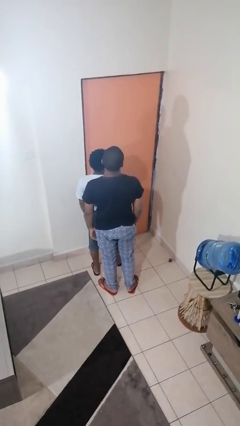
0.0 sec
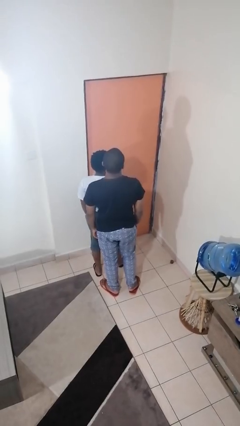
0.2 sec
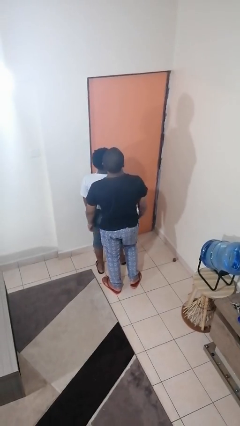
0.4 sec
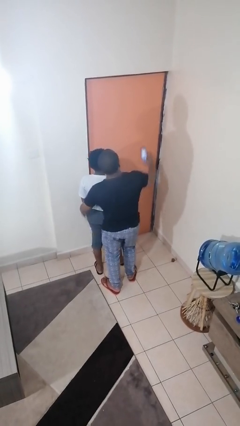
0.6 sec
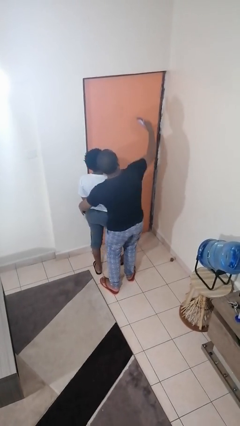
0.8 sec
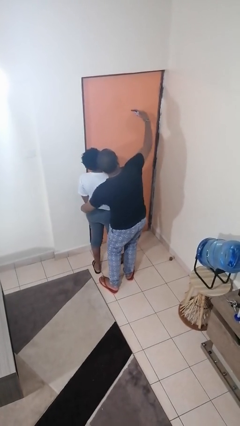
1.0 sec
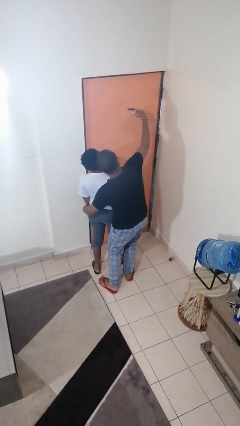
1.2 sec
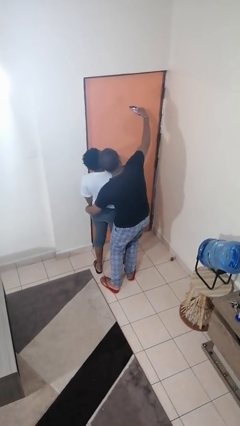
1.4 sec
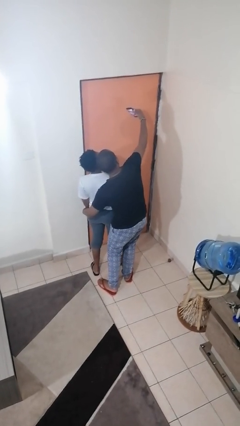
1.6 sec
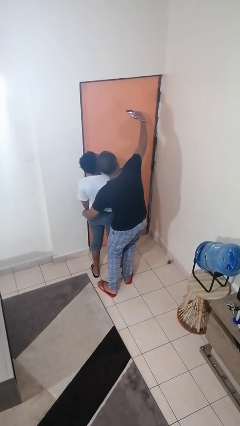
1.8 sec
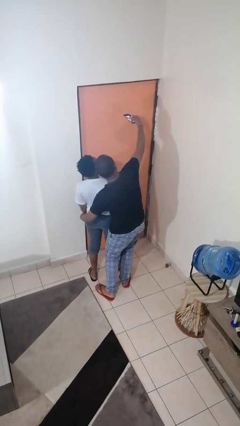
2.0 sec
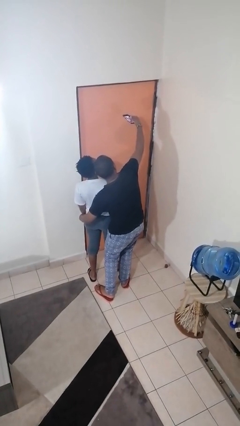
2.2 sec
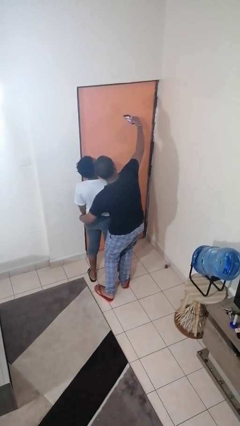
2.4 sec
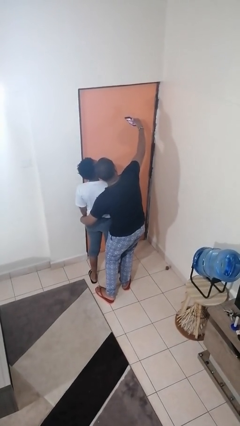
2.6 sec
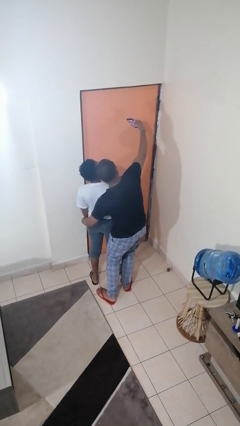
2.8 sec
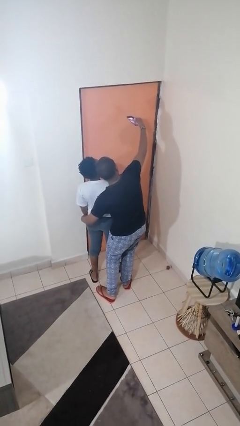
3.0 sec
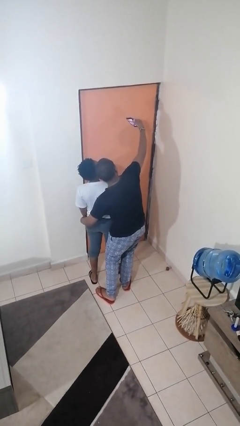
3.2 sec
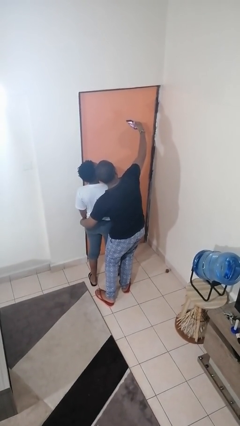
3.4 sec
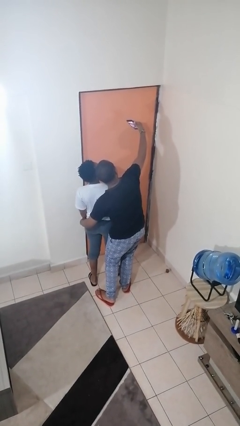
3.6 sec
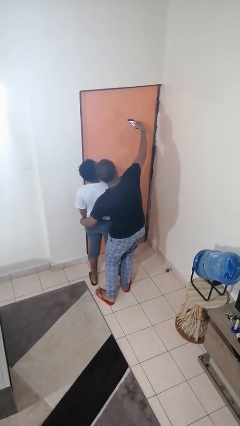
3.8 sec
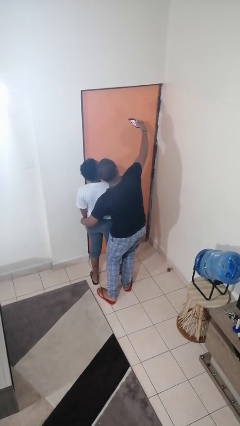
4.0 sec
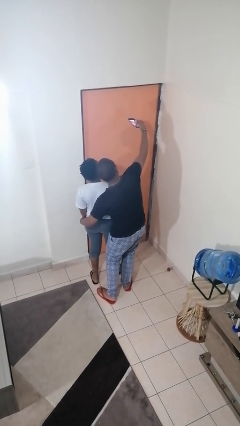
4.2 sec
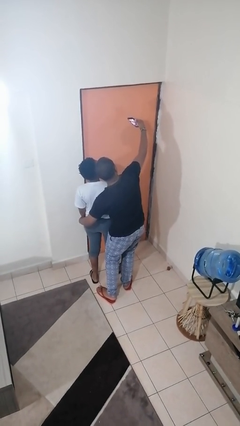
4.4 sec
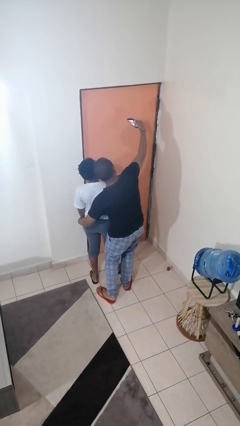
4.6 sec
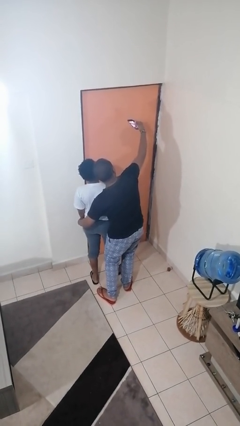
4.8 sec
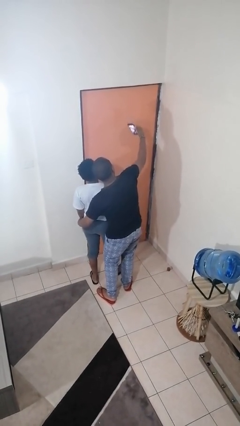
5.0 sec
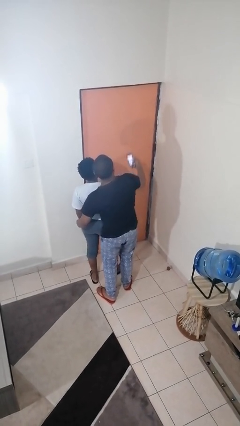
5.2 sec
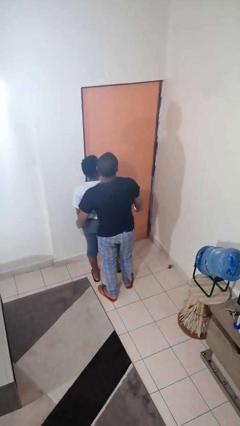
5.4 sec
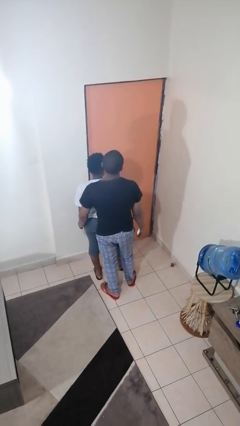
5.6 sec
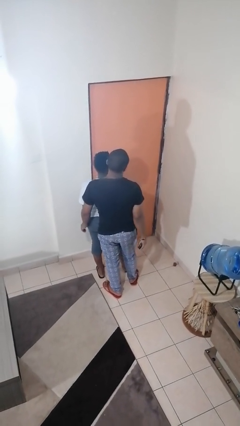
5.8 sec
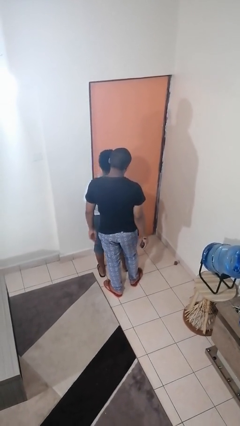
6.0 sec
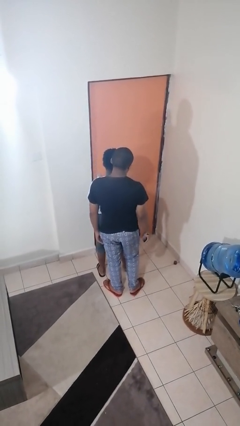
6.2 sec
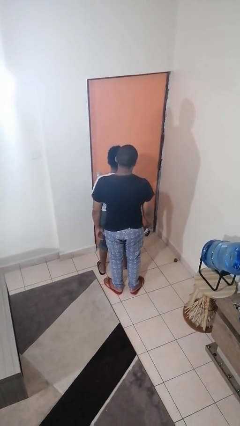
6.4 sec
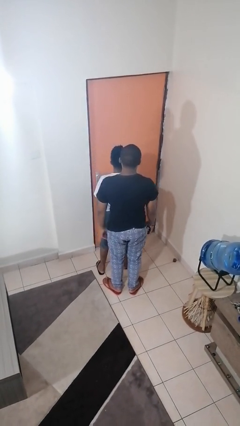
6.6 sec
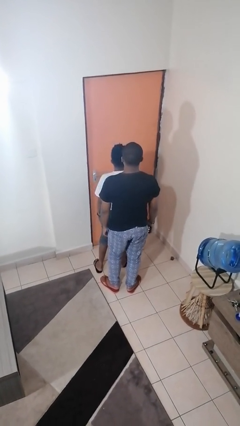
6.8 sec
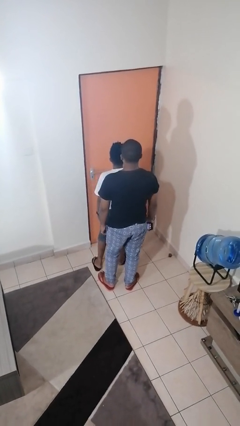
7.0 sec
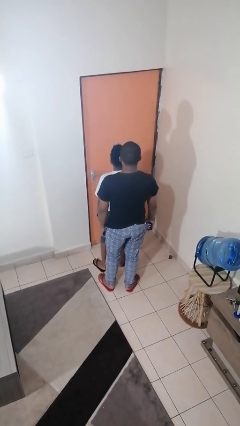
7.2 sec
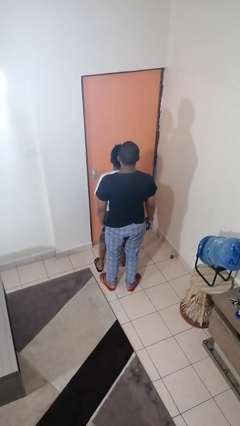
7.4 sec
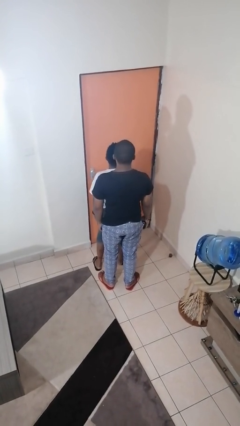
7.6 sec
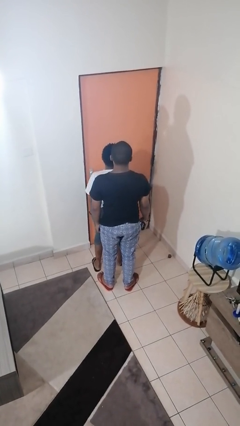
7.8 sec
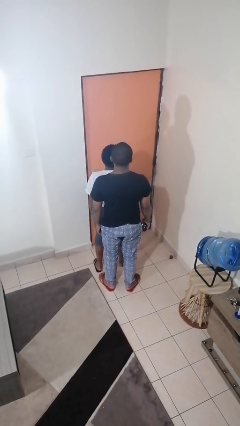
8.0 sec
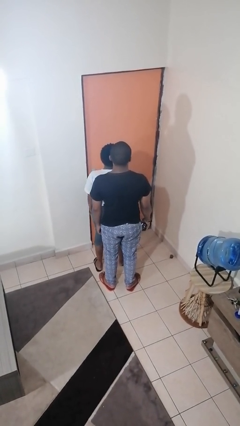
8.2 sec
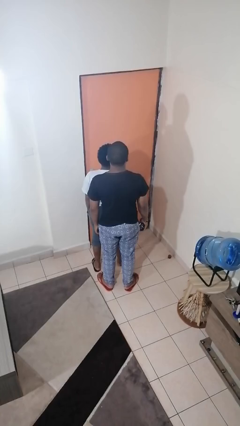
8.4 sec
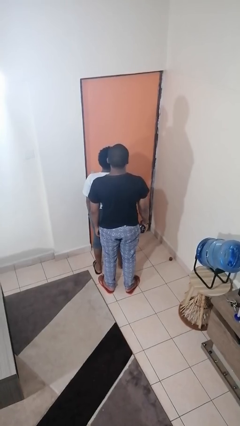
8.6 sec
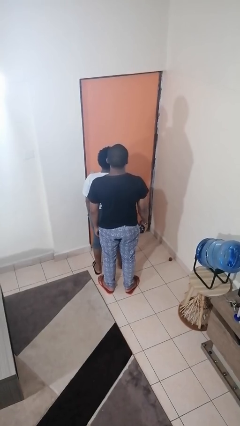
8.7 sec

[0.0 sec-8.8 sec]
person takes selfie with person

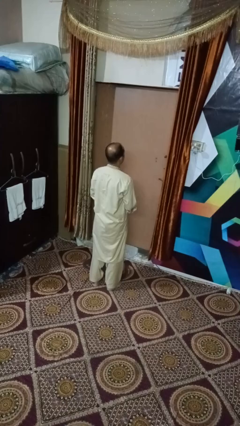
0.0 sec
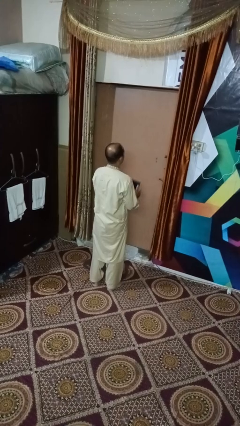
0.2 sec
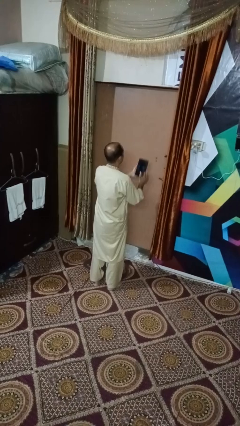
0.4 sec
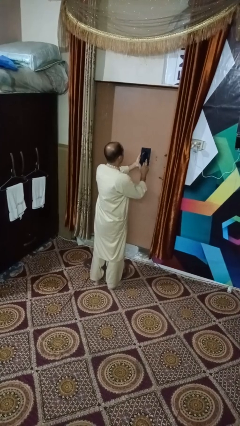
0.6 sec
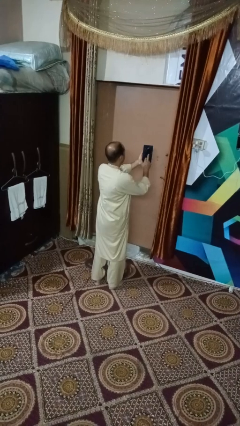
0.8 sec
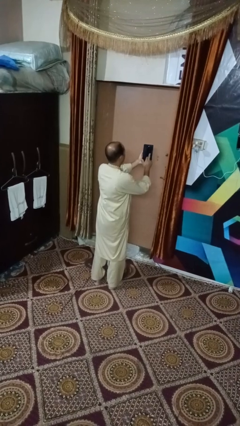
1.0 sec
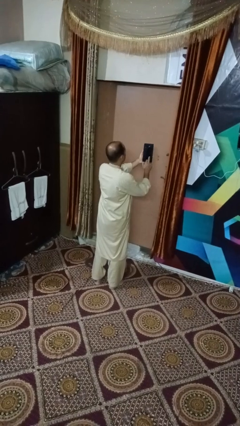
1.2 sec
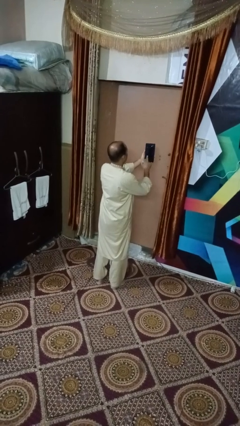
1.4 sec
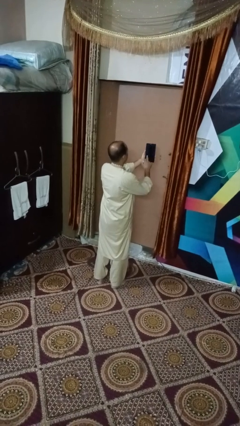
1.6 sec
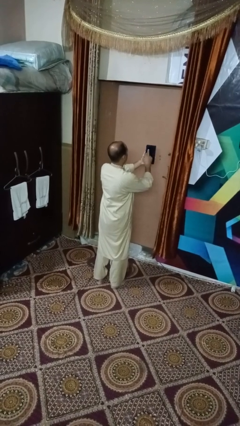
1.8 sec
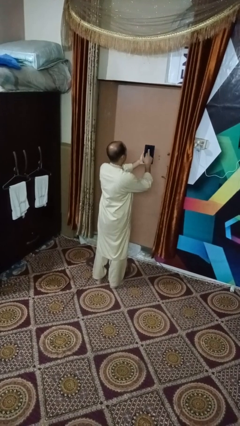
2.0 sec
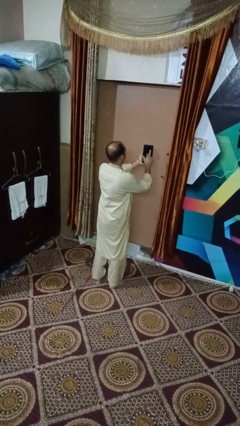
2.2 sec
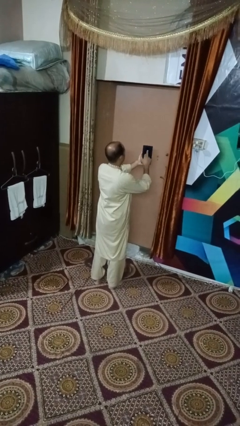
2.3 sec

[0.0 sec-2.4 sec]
person interacts with tablet

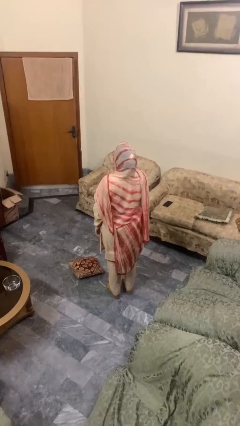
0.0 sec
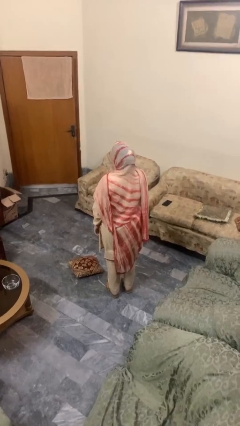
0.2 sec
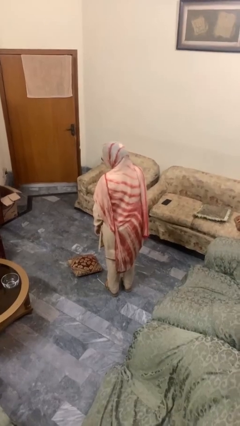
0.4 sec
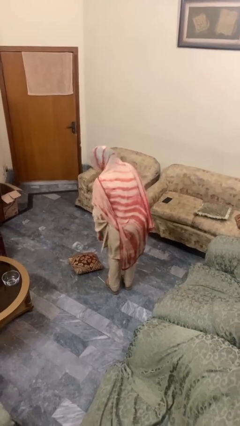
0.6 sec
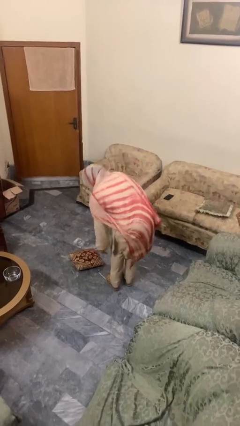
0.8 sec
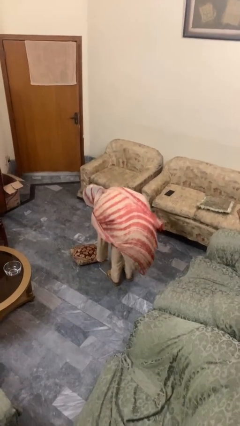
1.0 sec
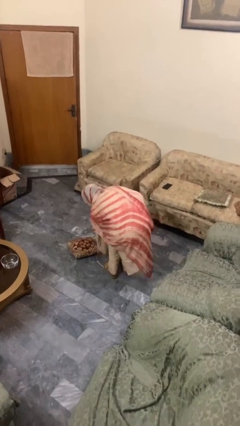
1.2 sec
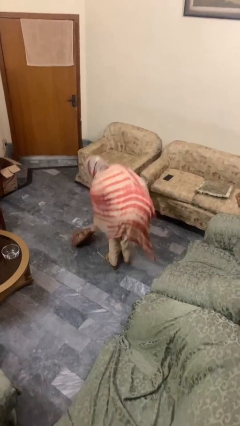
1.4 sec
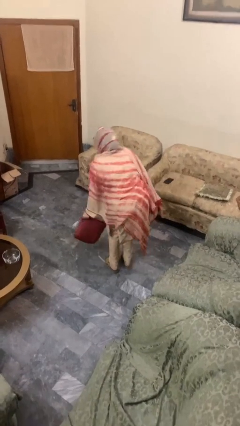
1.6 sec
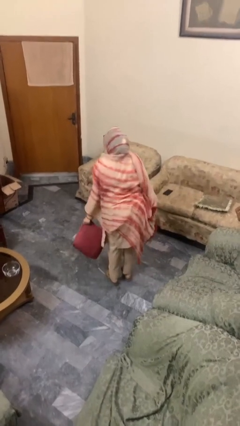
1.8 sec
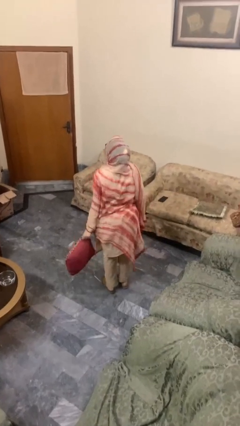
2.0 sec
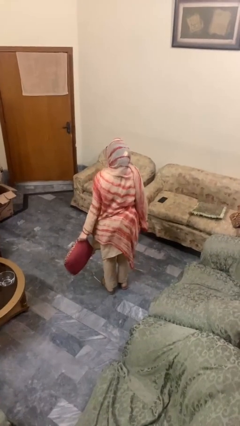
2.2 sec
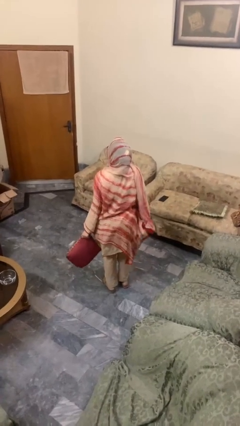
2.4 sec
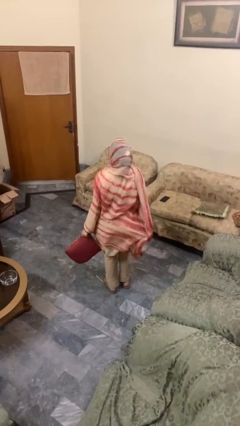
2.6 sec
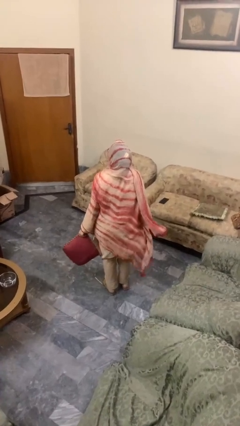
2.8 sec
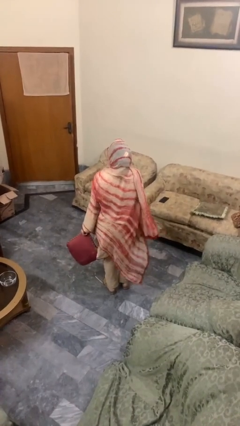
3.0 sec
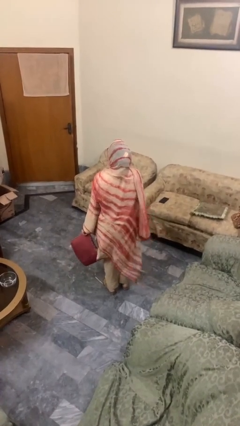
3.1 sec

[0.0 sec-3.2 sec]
person picks up object from floor

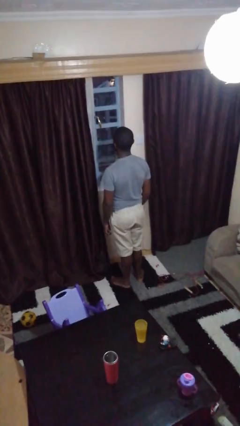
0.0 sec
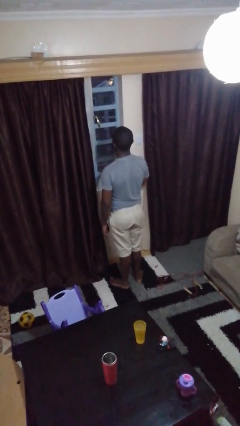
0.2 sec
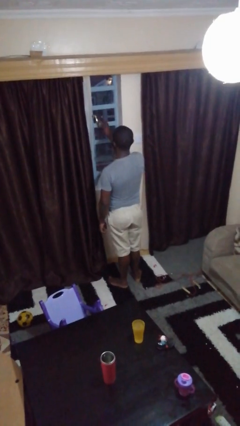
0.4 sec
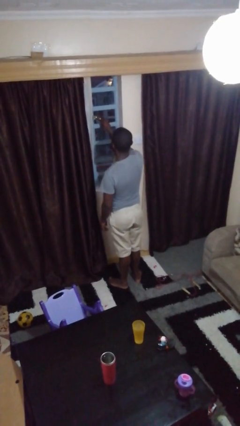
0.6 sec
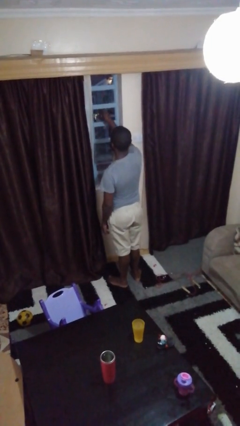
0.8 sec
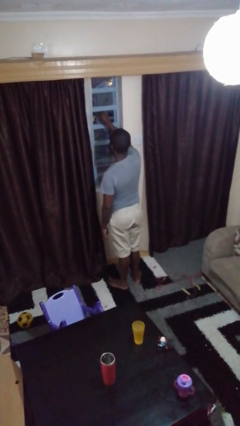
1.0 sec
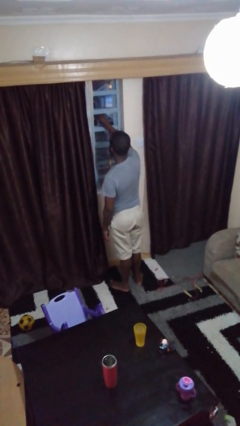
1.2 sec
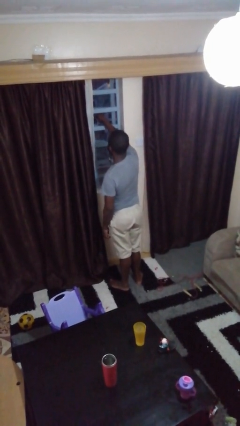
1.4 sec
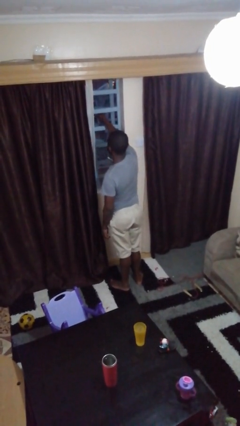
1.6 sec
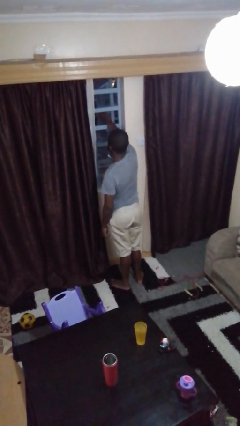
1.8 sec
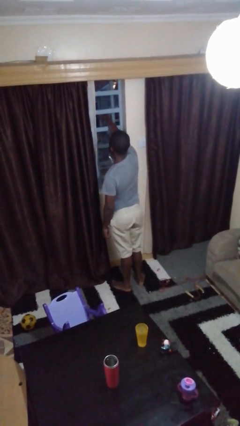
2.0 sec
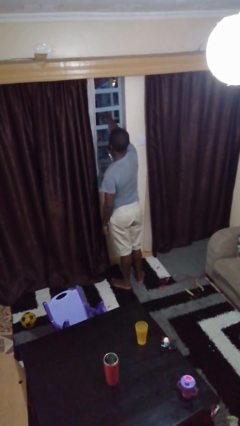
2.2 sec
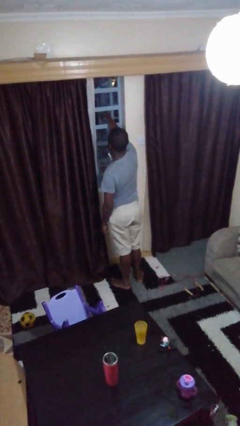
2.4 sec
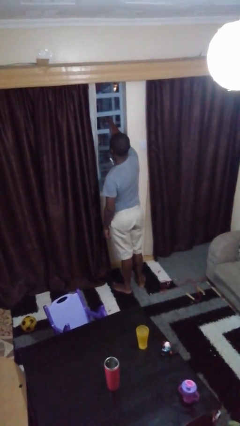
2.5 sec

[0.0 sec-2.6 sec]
person opens home window

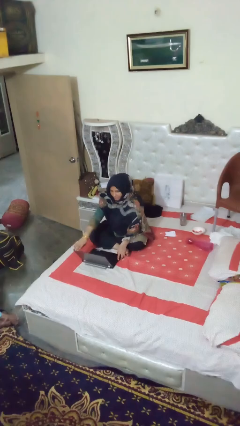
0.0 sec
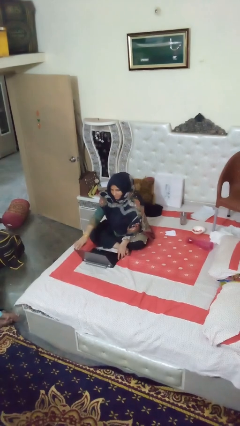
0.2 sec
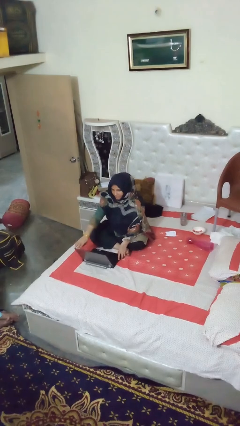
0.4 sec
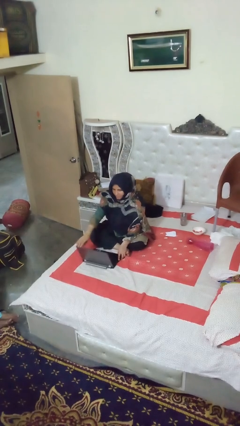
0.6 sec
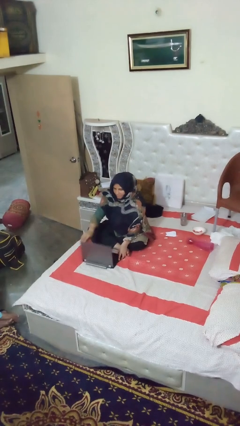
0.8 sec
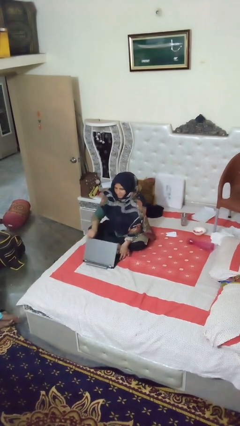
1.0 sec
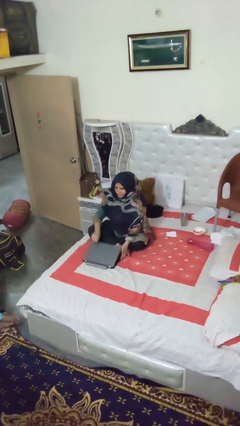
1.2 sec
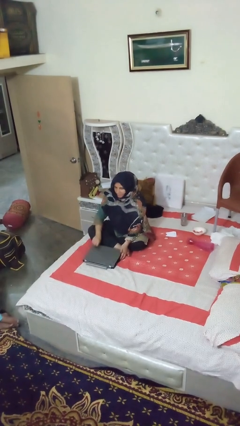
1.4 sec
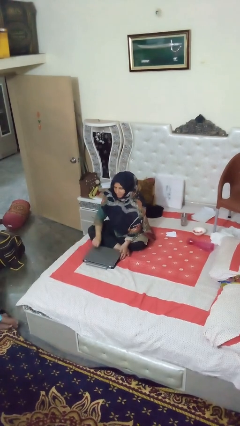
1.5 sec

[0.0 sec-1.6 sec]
person closes laptop
